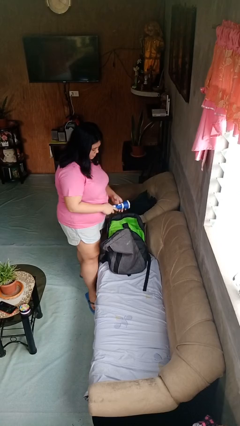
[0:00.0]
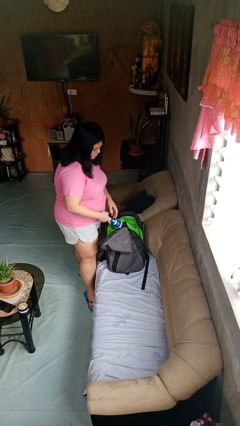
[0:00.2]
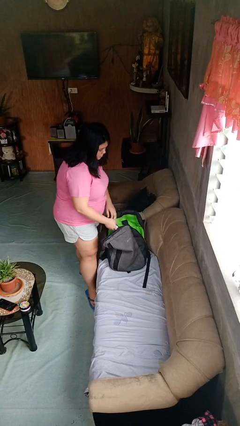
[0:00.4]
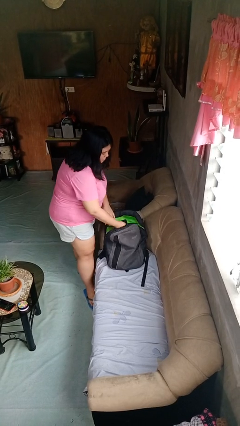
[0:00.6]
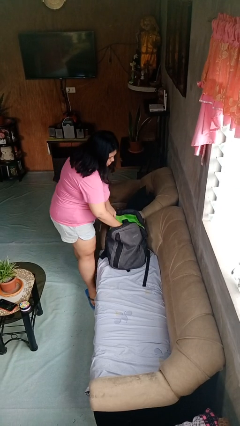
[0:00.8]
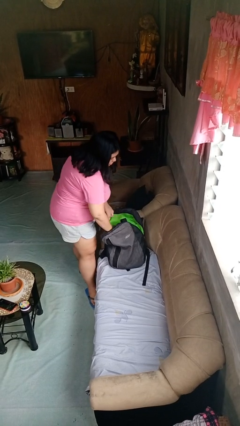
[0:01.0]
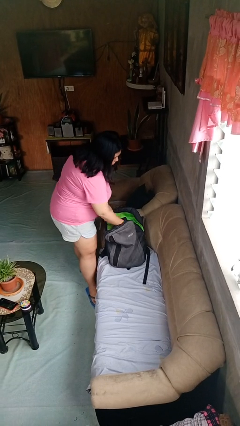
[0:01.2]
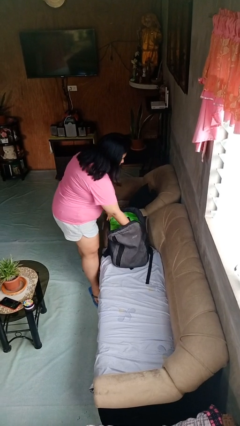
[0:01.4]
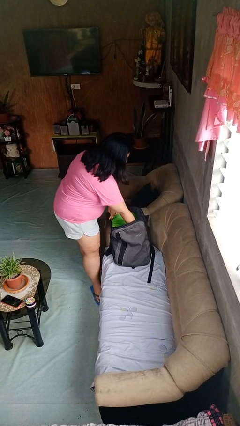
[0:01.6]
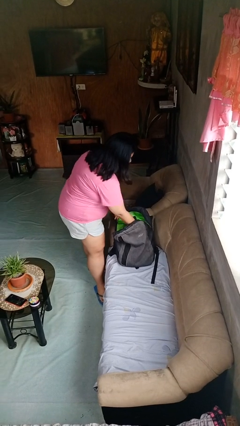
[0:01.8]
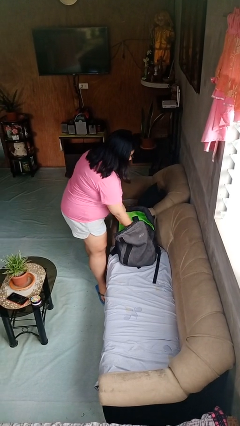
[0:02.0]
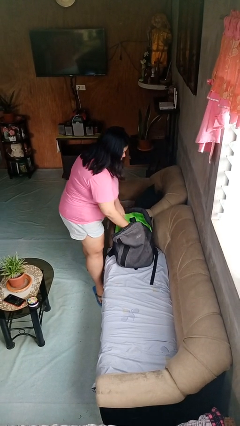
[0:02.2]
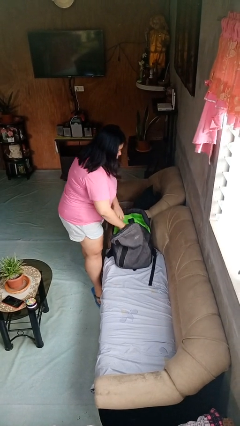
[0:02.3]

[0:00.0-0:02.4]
person puts object into backpack

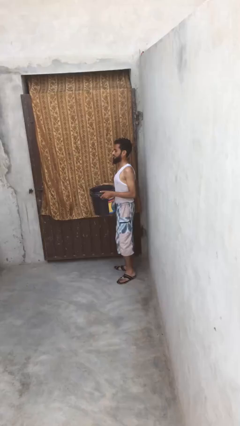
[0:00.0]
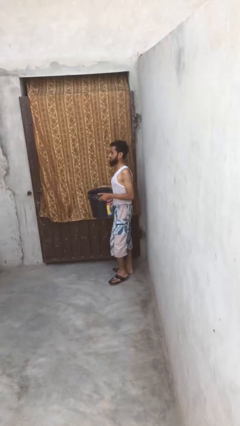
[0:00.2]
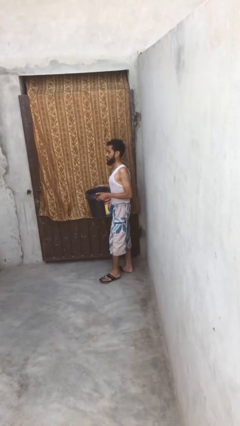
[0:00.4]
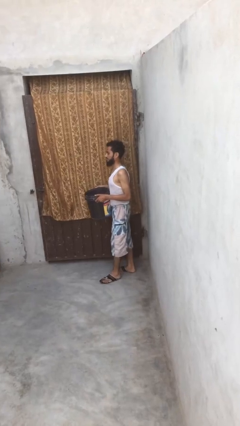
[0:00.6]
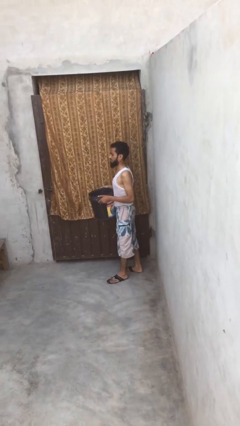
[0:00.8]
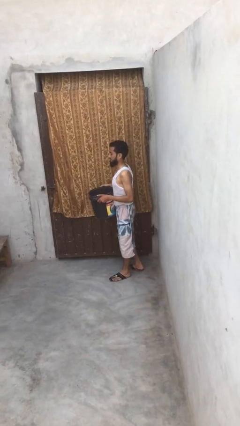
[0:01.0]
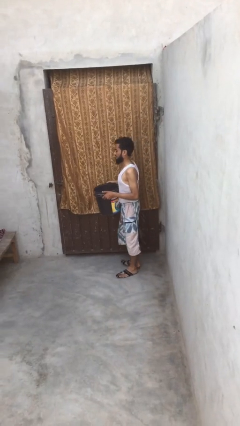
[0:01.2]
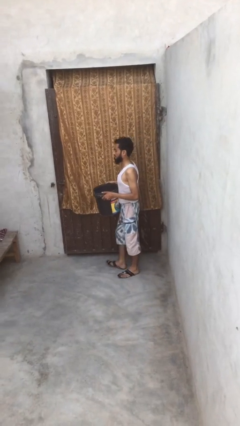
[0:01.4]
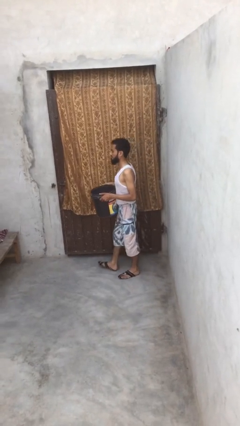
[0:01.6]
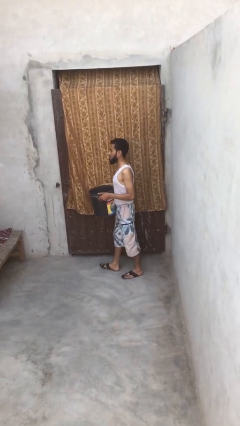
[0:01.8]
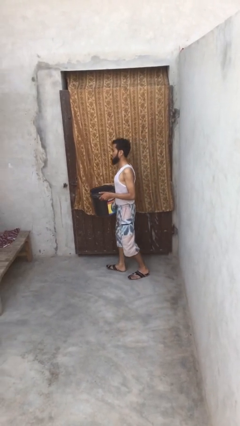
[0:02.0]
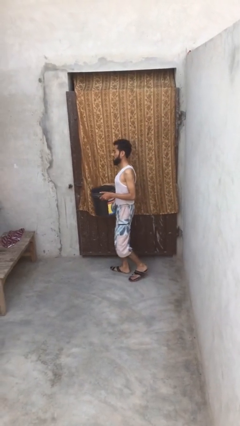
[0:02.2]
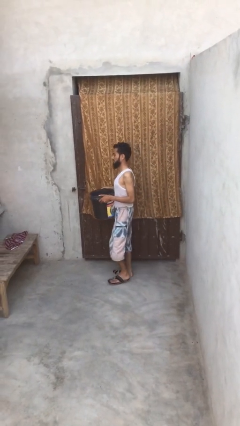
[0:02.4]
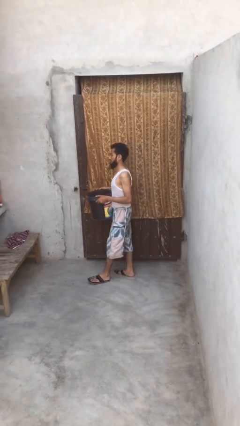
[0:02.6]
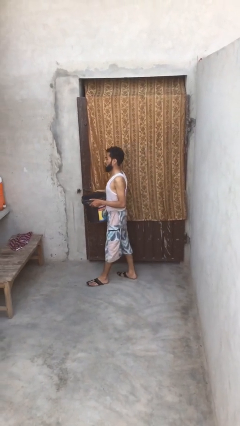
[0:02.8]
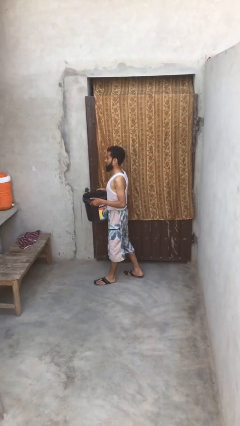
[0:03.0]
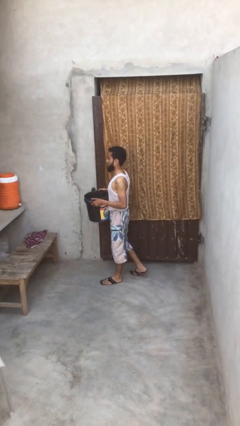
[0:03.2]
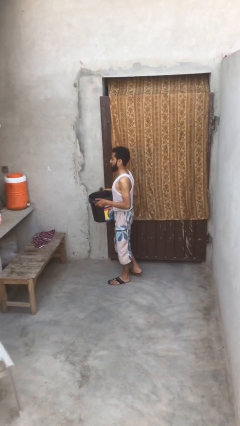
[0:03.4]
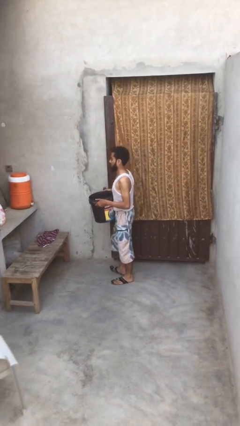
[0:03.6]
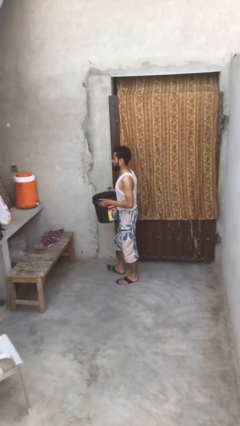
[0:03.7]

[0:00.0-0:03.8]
person carries heavy object

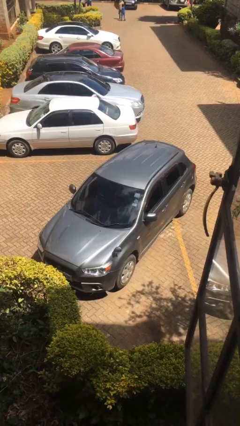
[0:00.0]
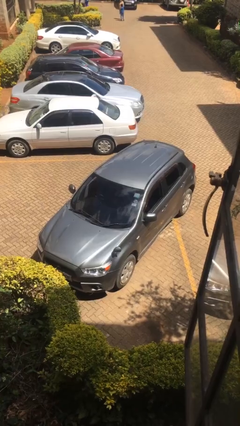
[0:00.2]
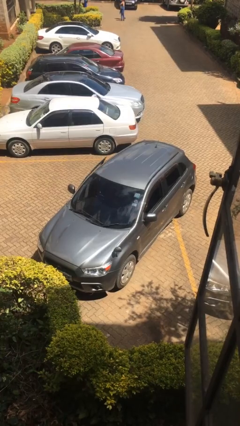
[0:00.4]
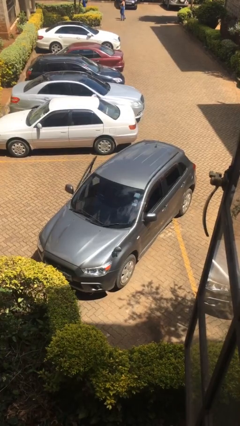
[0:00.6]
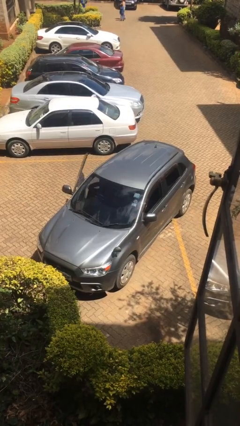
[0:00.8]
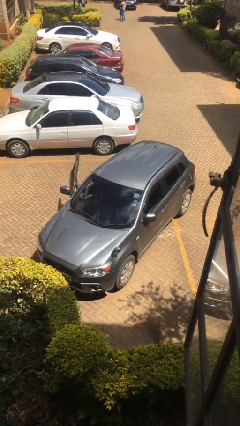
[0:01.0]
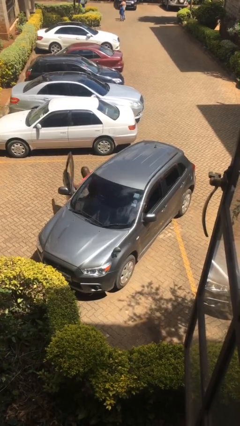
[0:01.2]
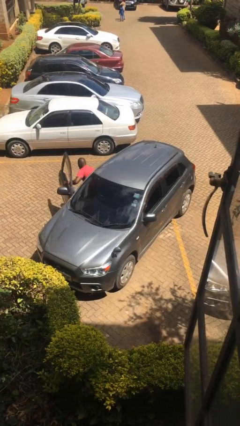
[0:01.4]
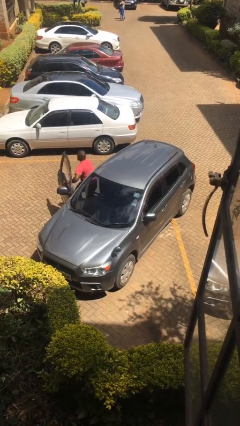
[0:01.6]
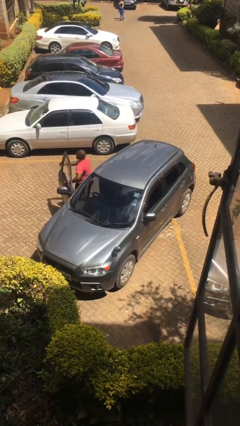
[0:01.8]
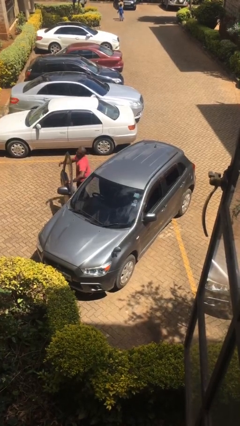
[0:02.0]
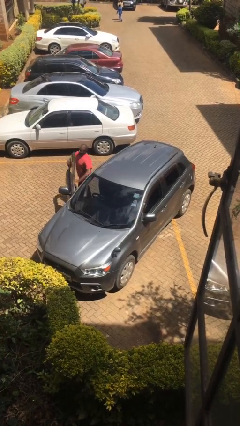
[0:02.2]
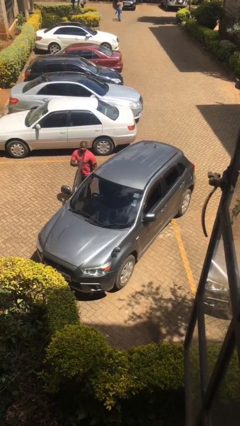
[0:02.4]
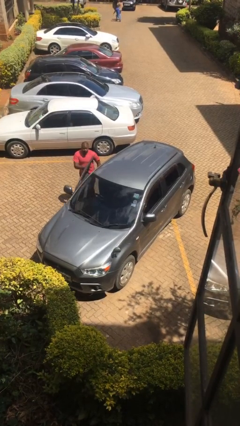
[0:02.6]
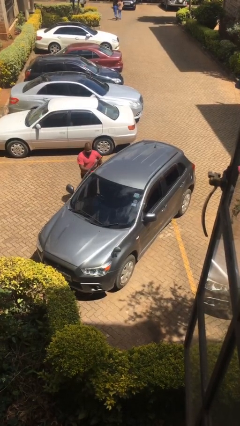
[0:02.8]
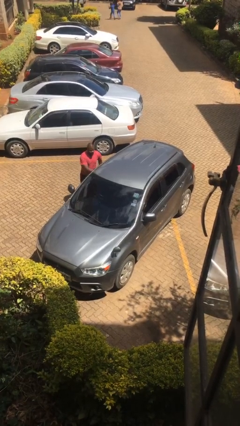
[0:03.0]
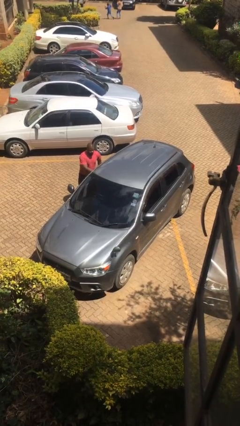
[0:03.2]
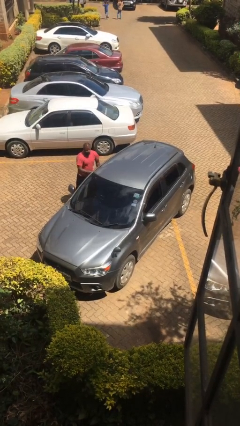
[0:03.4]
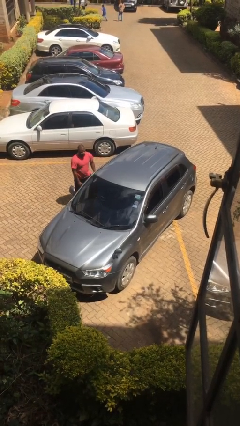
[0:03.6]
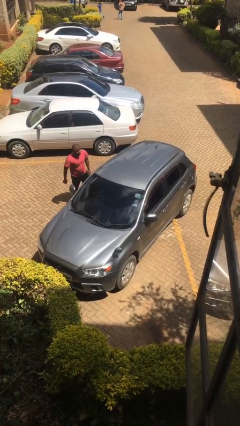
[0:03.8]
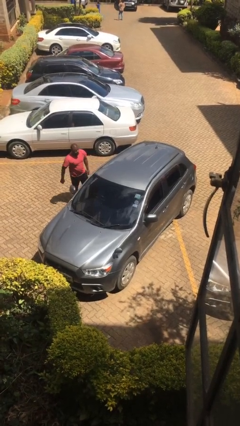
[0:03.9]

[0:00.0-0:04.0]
car drops off person

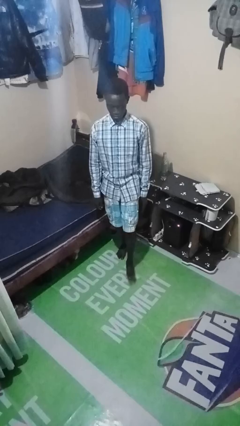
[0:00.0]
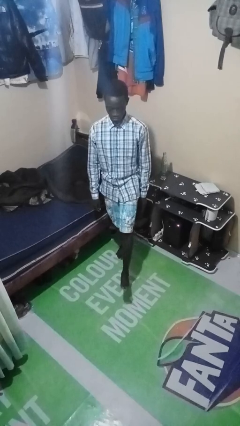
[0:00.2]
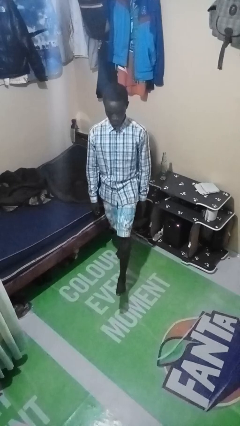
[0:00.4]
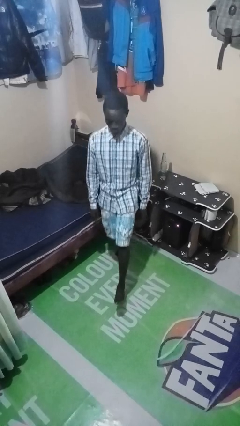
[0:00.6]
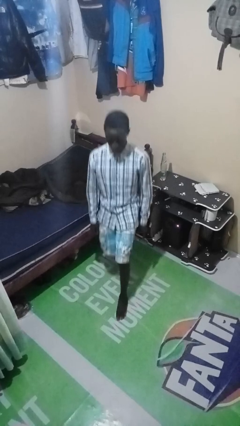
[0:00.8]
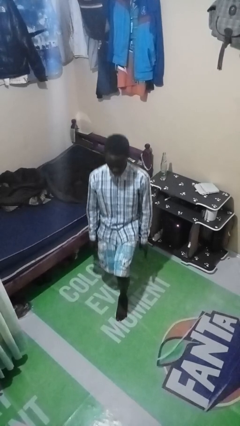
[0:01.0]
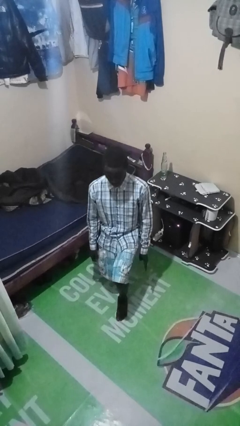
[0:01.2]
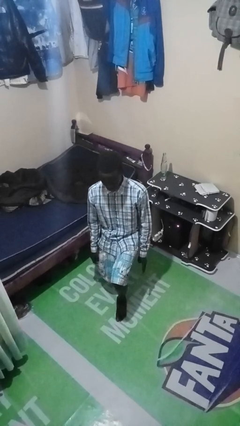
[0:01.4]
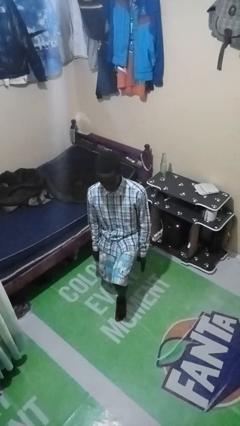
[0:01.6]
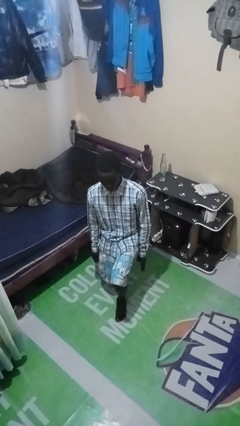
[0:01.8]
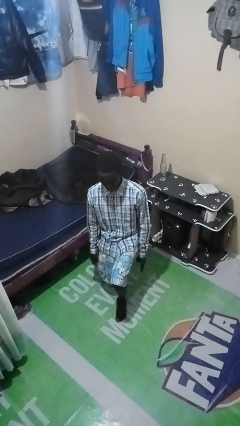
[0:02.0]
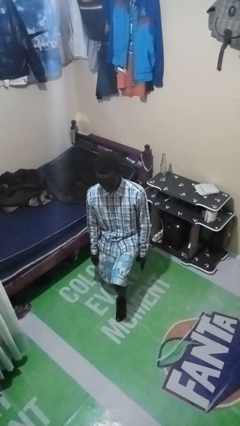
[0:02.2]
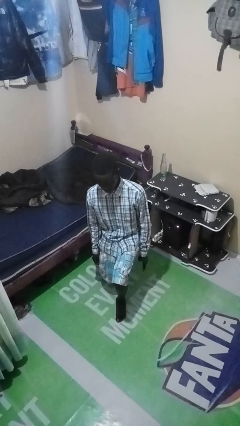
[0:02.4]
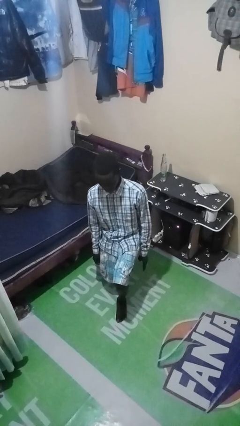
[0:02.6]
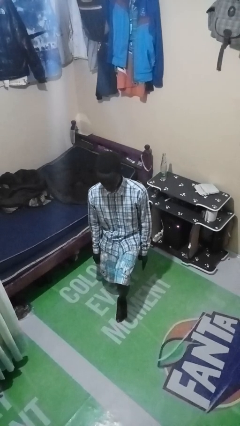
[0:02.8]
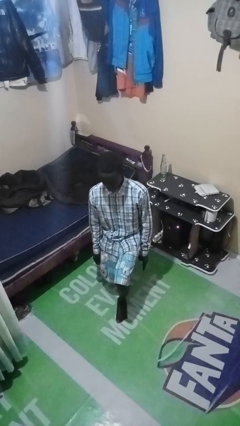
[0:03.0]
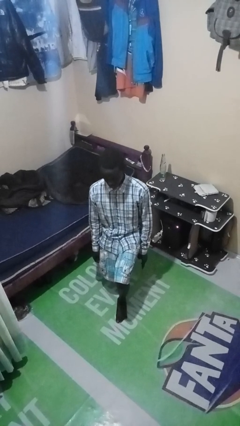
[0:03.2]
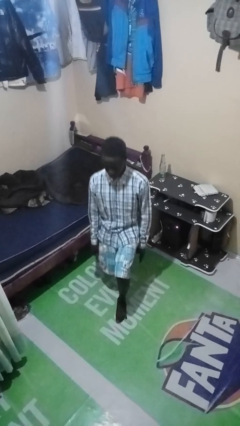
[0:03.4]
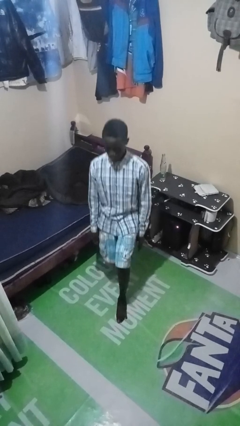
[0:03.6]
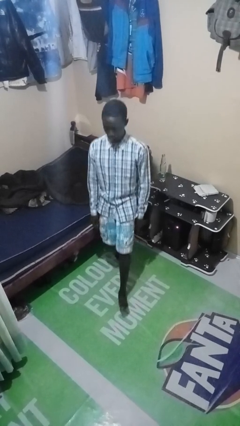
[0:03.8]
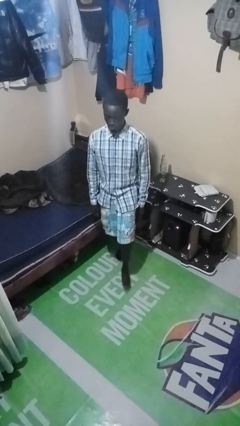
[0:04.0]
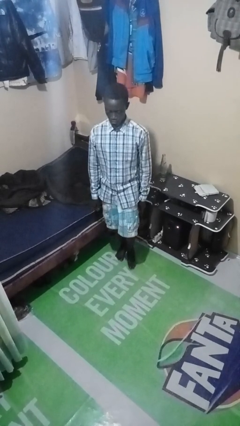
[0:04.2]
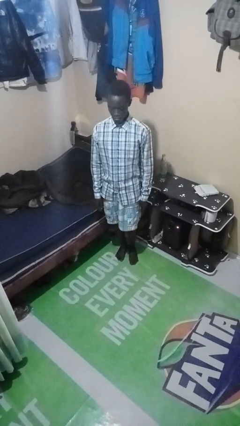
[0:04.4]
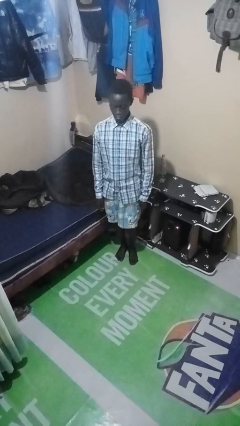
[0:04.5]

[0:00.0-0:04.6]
person exercises with lunges

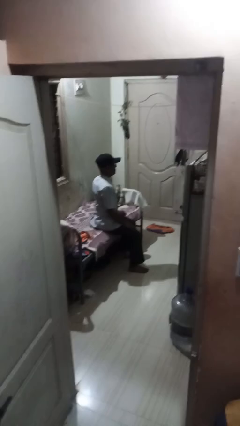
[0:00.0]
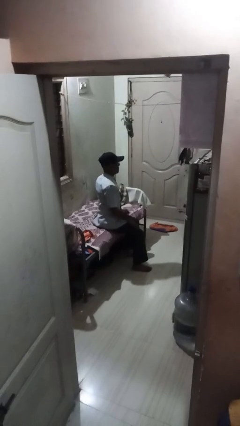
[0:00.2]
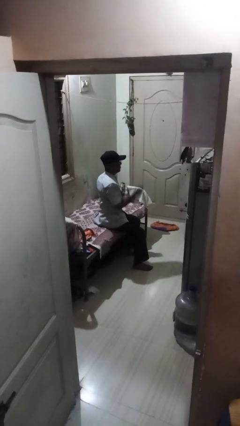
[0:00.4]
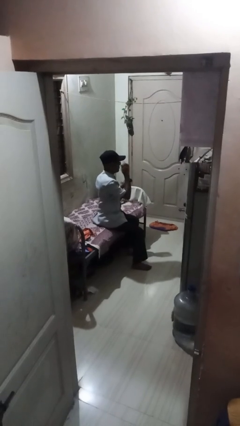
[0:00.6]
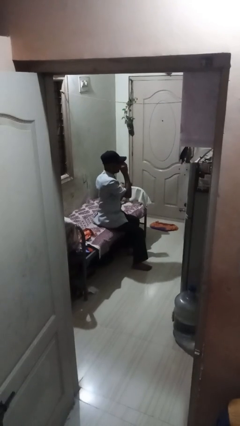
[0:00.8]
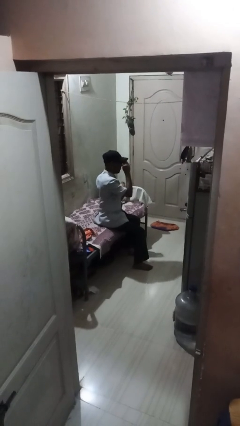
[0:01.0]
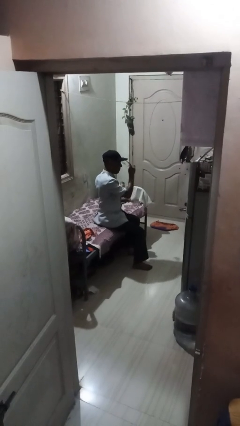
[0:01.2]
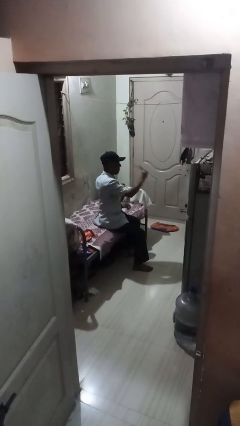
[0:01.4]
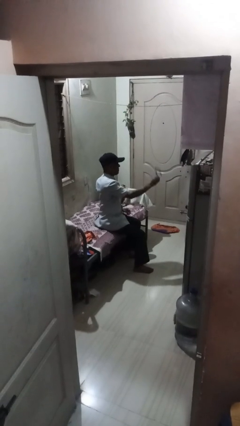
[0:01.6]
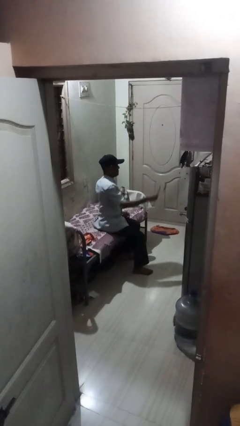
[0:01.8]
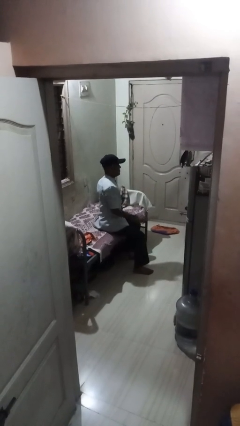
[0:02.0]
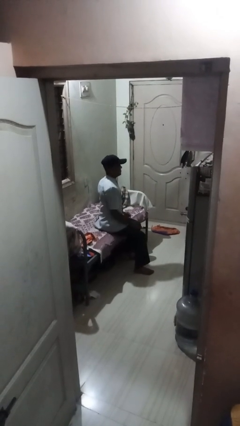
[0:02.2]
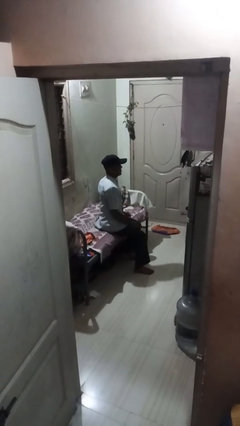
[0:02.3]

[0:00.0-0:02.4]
person takes off glasses

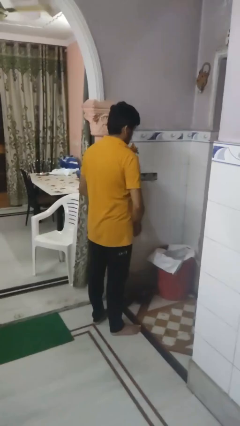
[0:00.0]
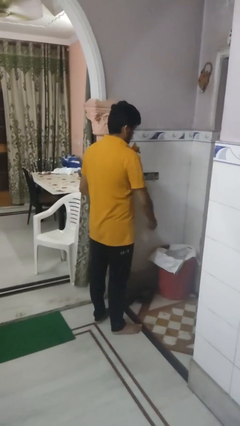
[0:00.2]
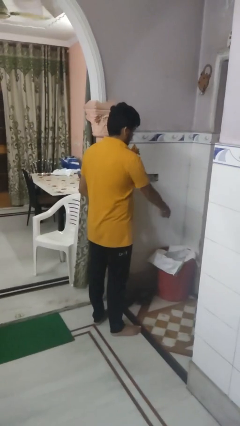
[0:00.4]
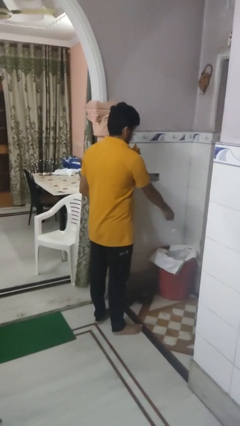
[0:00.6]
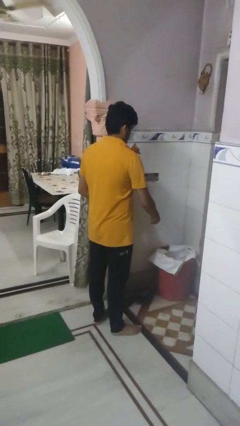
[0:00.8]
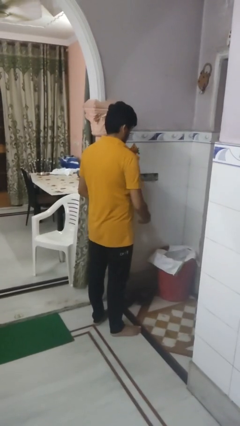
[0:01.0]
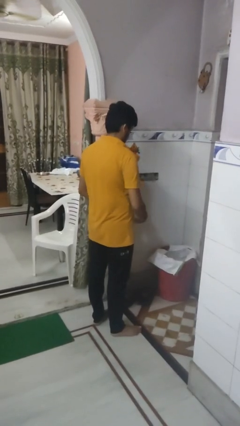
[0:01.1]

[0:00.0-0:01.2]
person discards trash
